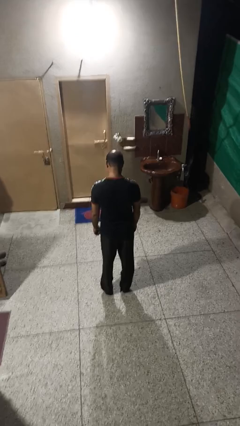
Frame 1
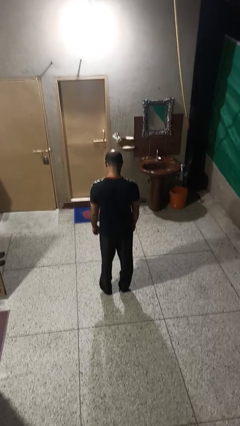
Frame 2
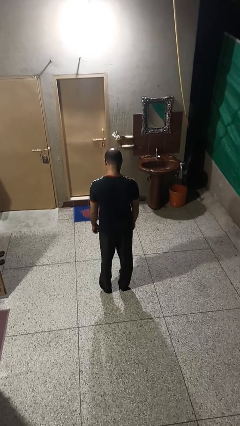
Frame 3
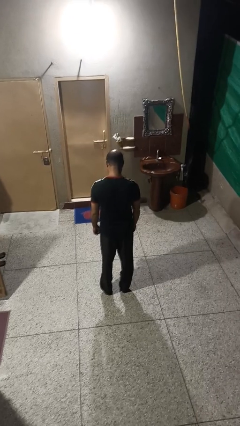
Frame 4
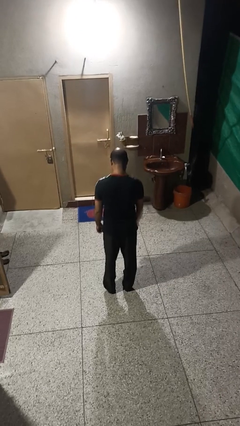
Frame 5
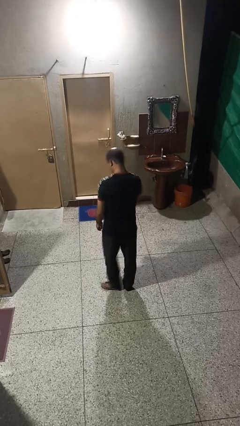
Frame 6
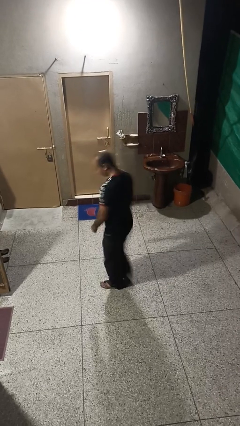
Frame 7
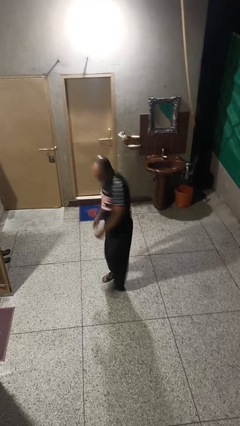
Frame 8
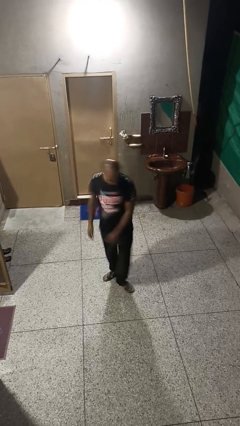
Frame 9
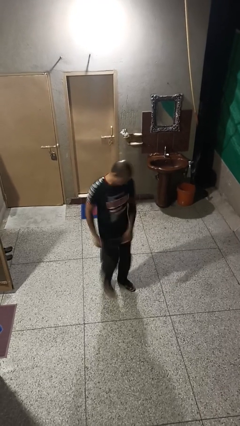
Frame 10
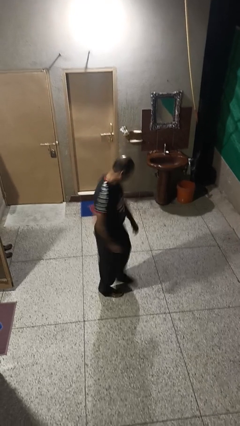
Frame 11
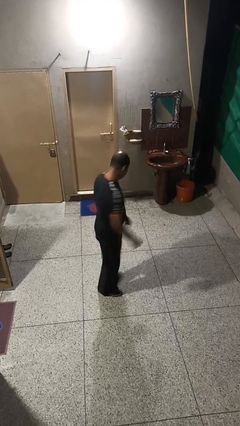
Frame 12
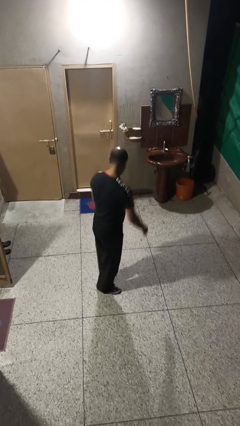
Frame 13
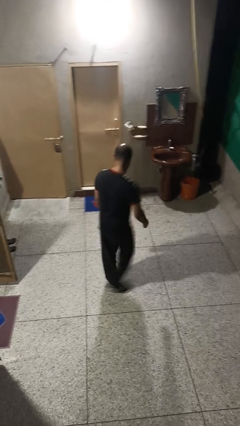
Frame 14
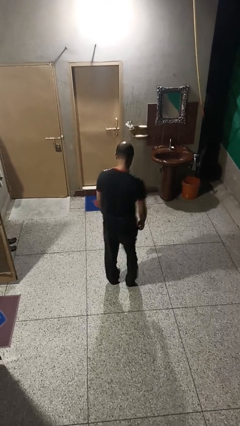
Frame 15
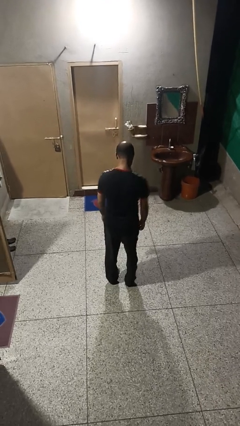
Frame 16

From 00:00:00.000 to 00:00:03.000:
person twirls

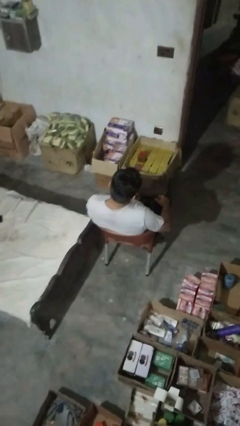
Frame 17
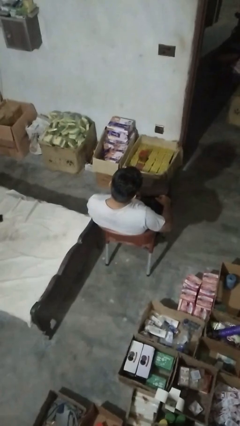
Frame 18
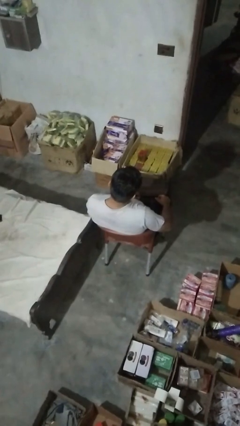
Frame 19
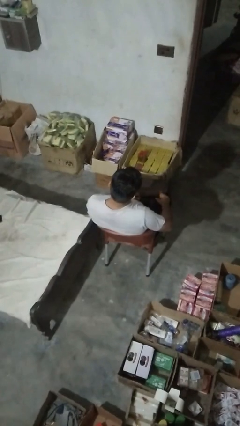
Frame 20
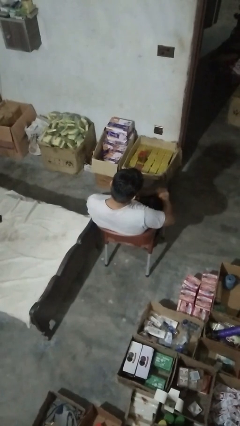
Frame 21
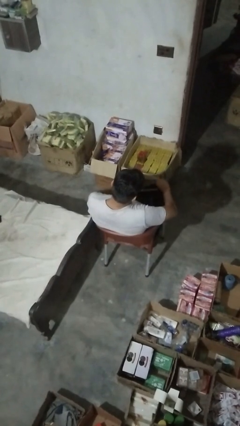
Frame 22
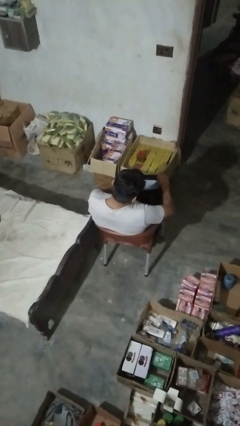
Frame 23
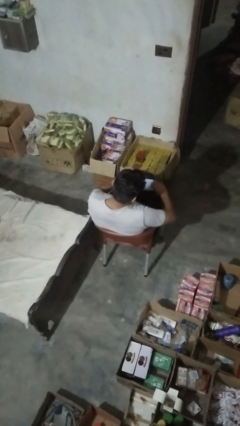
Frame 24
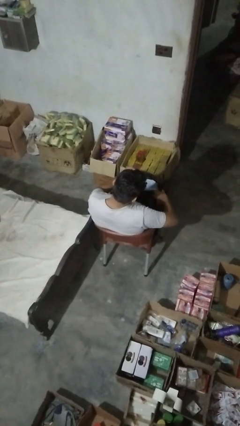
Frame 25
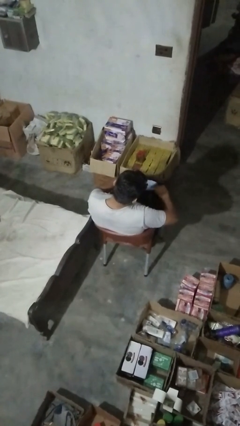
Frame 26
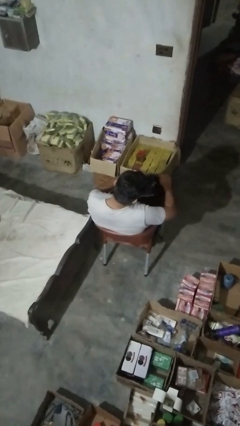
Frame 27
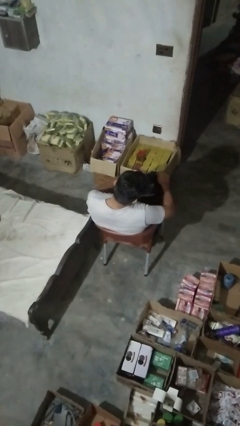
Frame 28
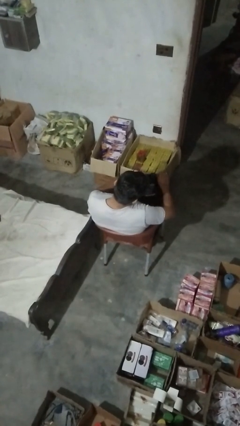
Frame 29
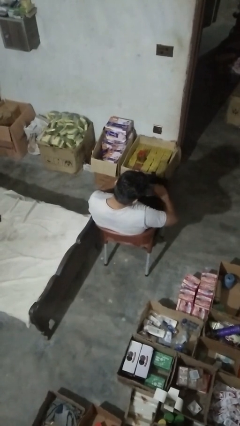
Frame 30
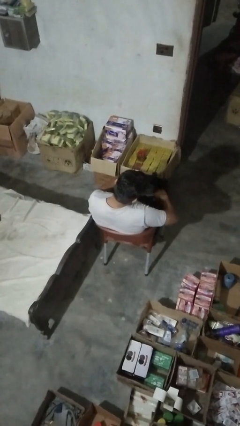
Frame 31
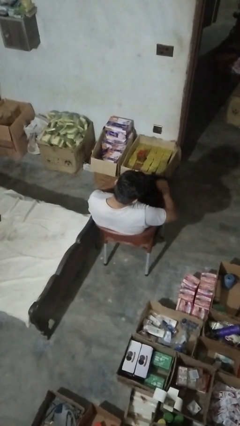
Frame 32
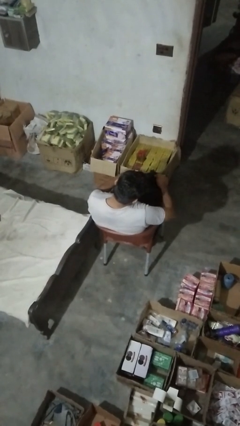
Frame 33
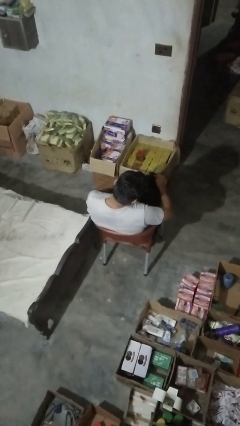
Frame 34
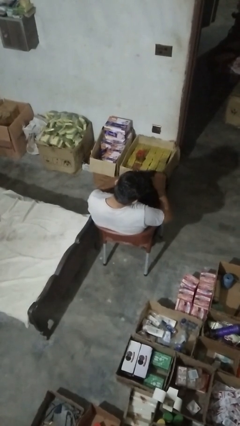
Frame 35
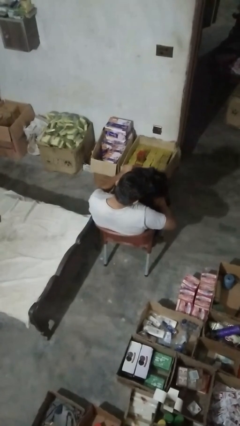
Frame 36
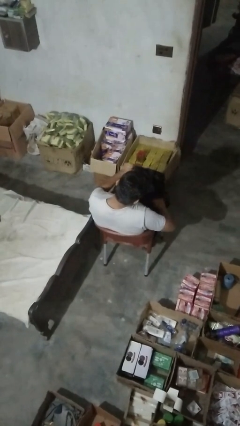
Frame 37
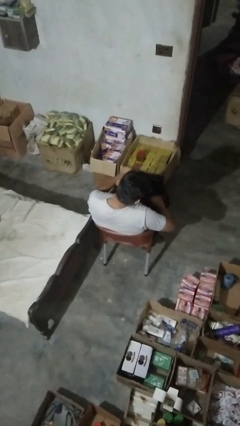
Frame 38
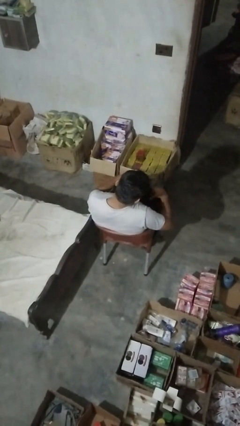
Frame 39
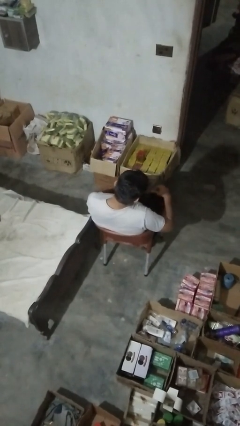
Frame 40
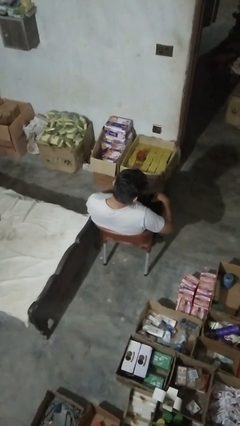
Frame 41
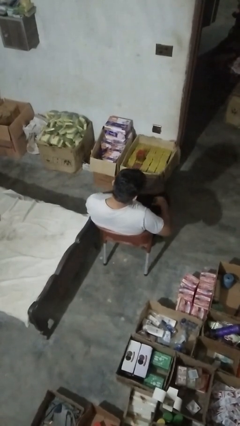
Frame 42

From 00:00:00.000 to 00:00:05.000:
person searches in bag

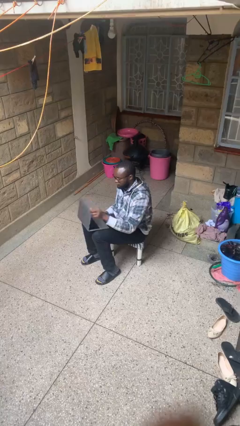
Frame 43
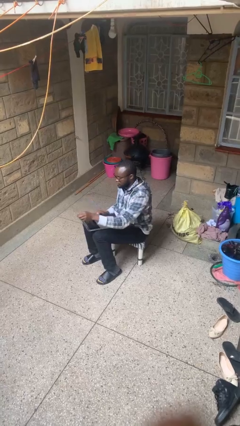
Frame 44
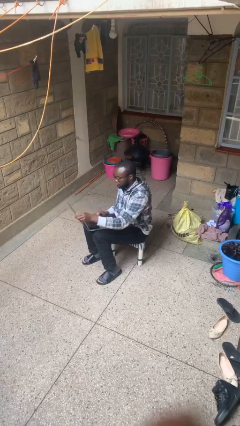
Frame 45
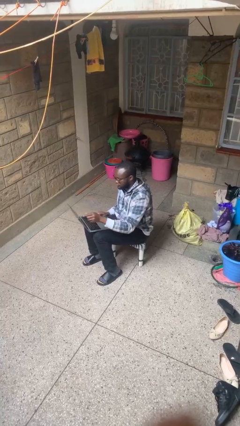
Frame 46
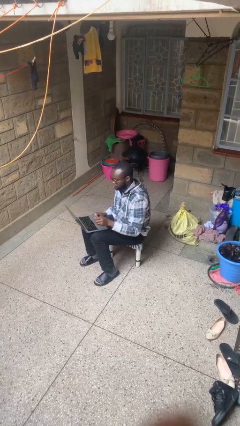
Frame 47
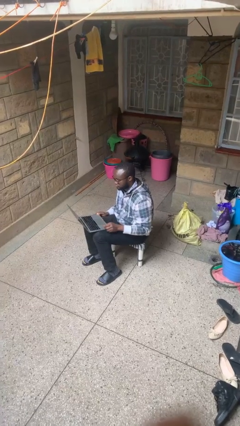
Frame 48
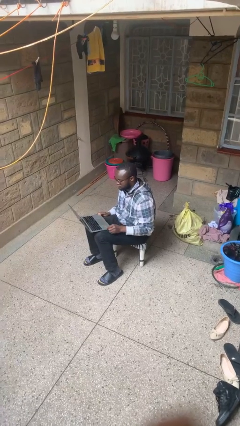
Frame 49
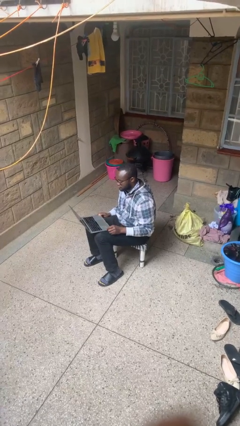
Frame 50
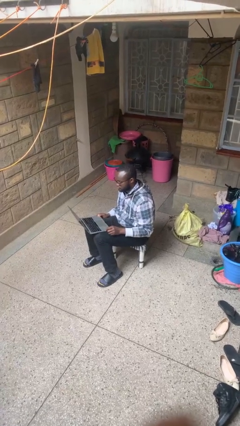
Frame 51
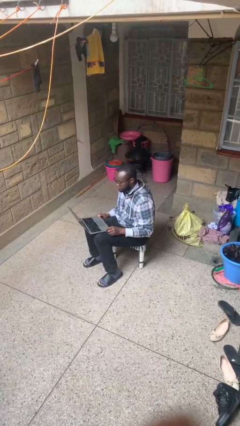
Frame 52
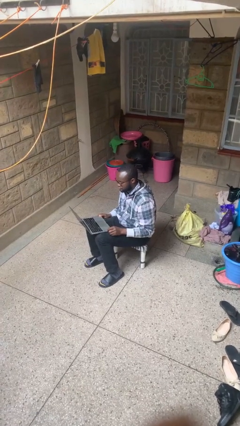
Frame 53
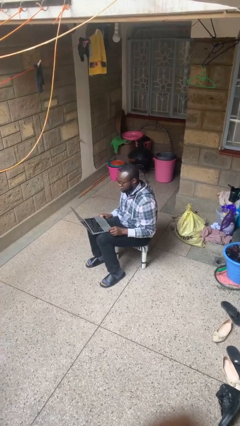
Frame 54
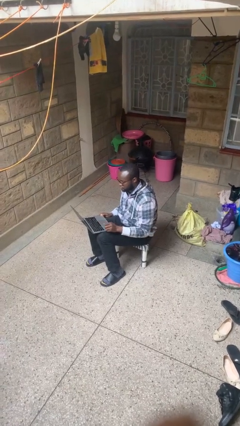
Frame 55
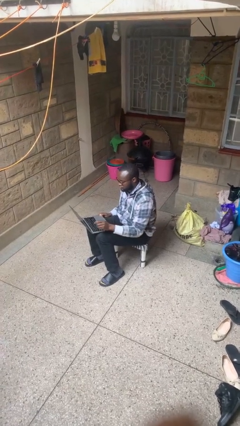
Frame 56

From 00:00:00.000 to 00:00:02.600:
person opens laptop

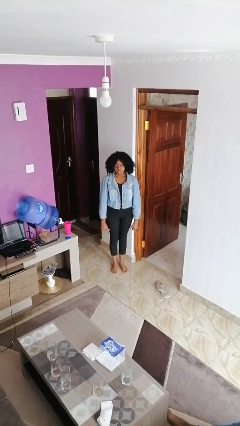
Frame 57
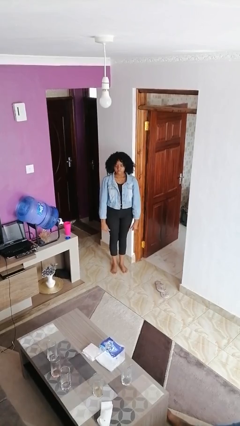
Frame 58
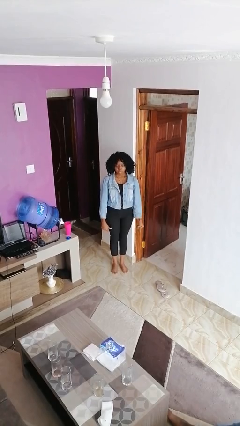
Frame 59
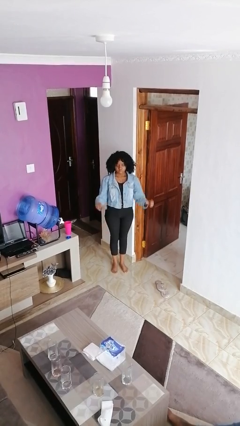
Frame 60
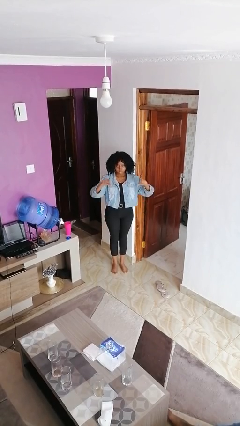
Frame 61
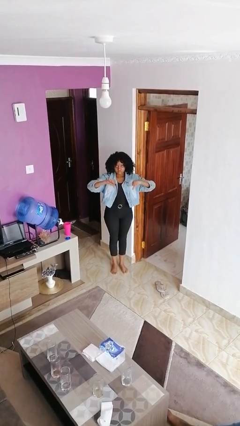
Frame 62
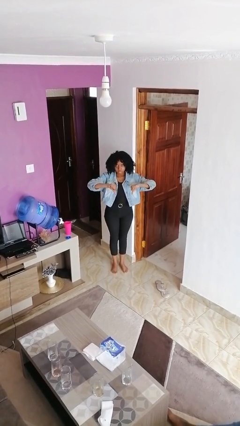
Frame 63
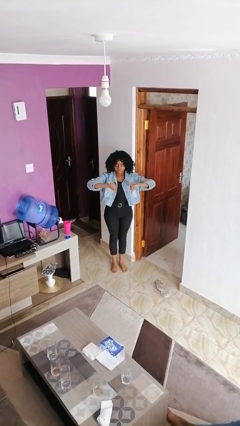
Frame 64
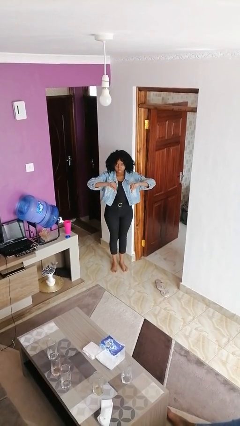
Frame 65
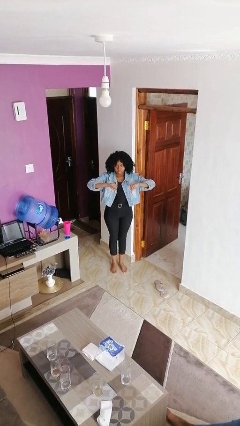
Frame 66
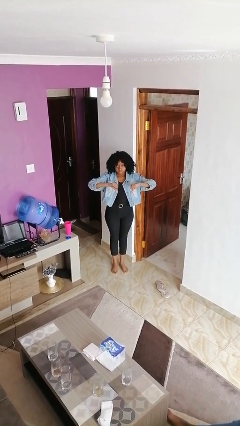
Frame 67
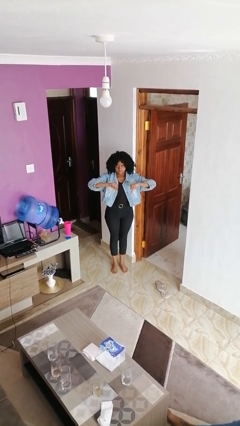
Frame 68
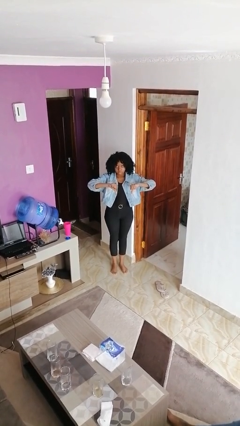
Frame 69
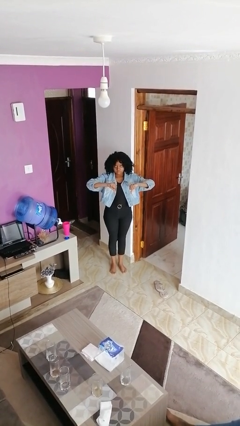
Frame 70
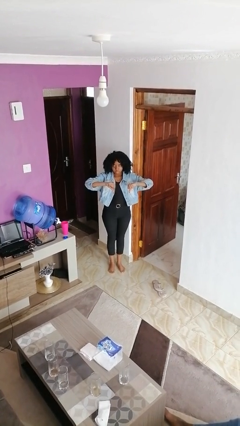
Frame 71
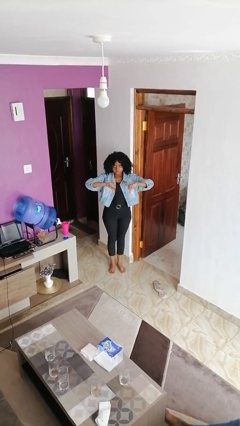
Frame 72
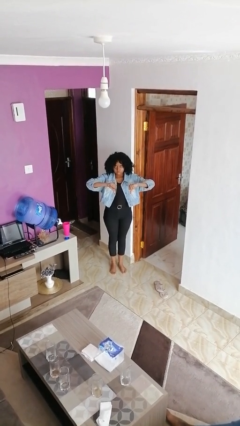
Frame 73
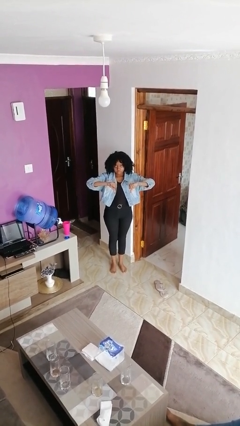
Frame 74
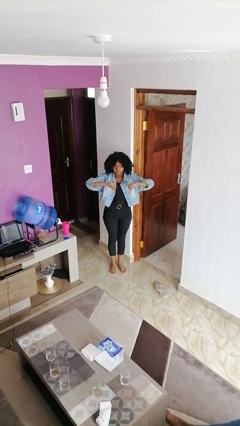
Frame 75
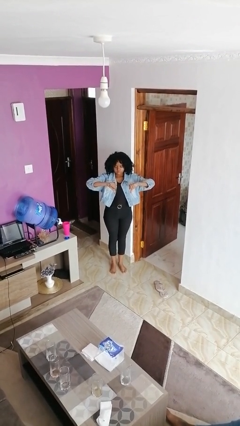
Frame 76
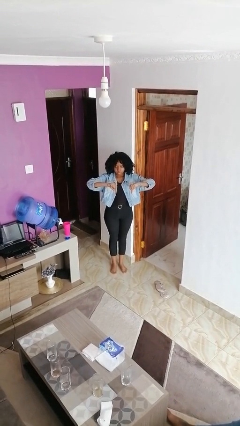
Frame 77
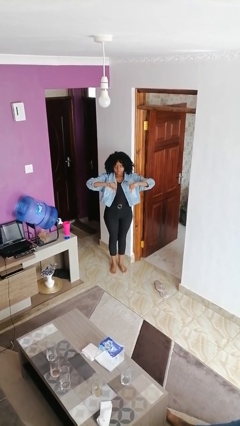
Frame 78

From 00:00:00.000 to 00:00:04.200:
person gestures thumbs down

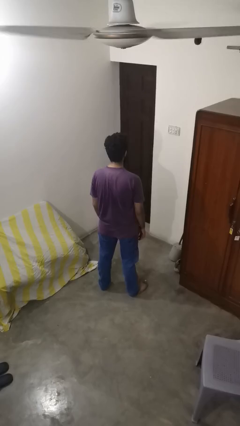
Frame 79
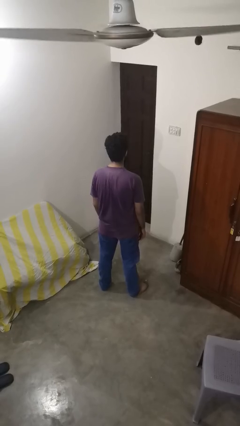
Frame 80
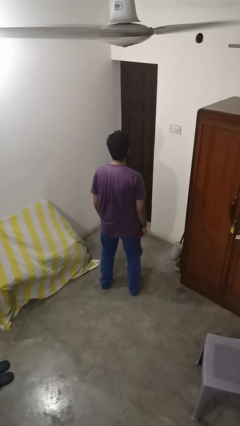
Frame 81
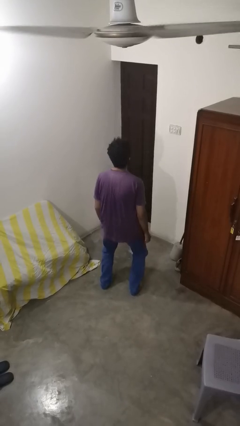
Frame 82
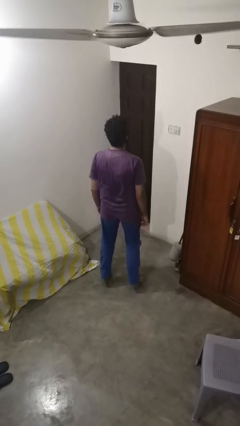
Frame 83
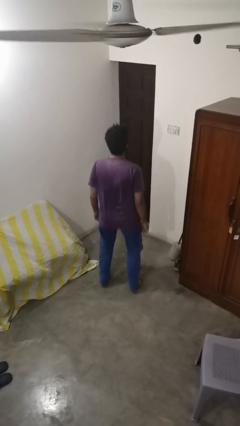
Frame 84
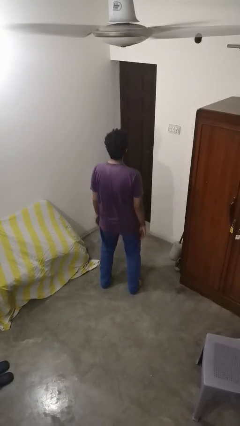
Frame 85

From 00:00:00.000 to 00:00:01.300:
person jumps

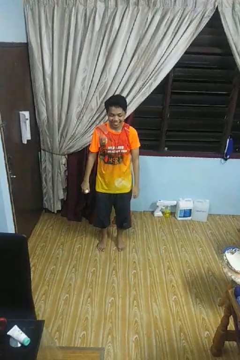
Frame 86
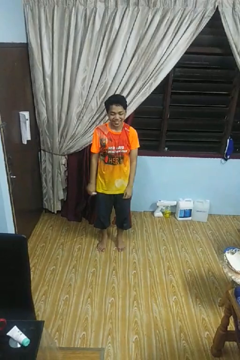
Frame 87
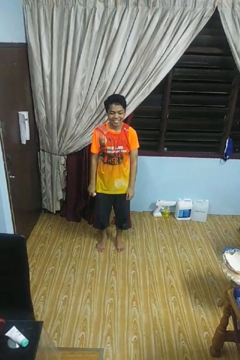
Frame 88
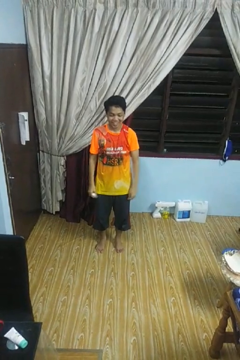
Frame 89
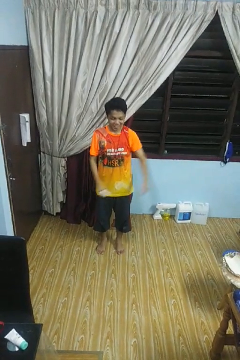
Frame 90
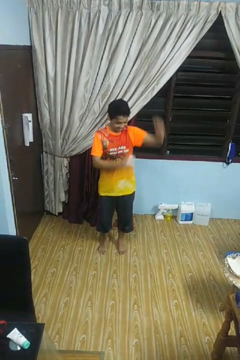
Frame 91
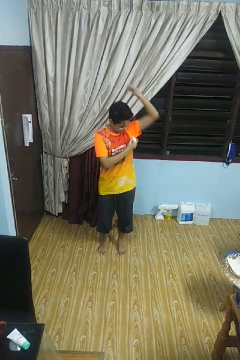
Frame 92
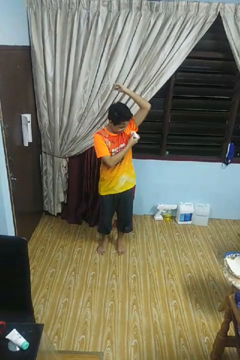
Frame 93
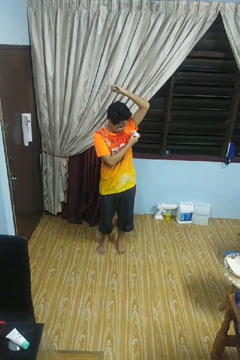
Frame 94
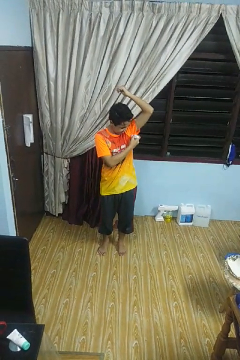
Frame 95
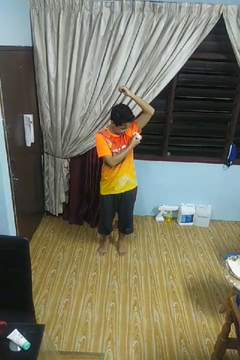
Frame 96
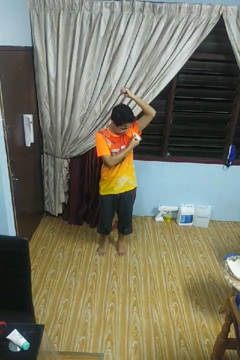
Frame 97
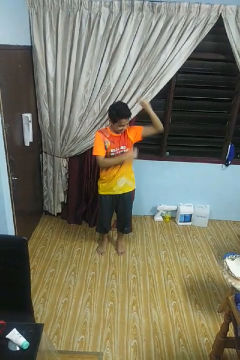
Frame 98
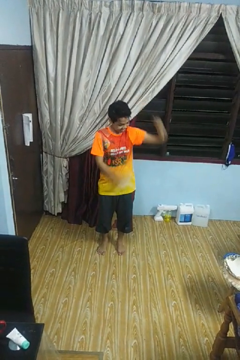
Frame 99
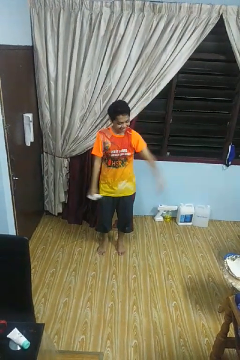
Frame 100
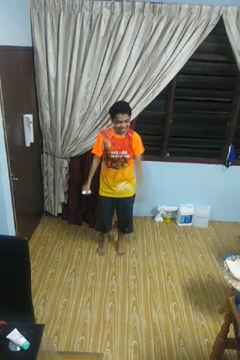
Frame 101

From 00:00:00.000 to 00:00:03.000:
person applies deodorant
